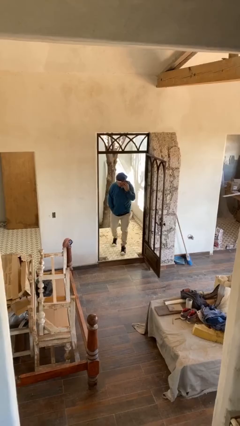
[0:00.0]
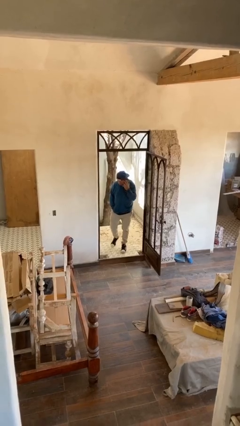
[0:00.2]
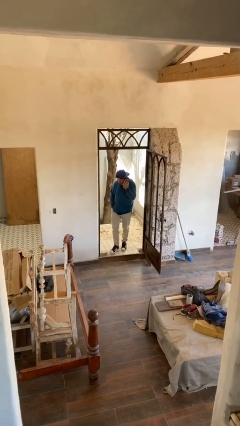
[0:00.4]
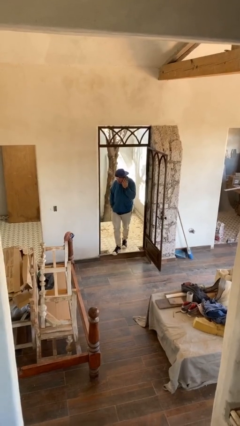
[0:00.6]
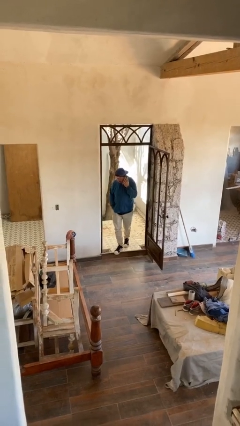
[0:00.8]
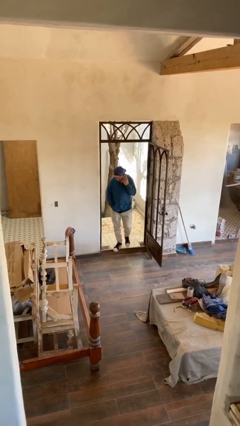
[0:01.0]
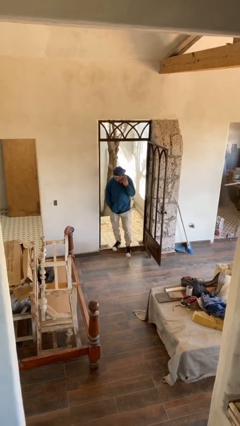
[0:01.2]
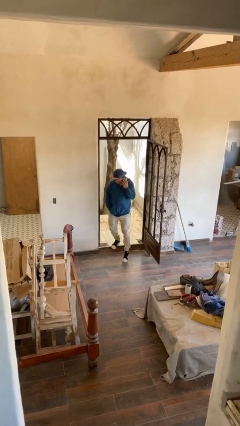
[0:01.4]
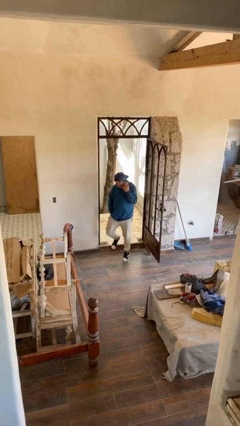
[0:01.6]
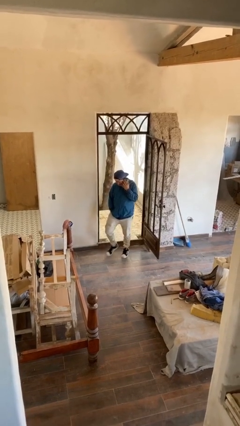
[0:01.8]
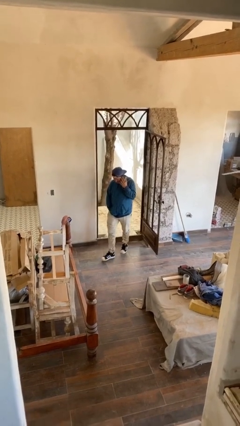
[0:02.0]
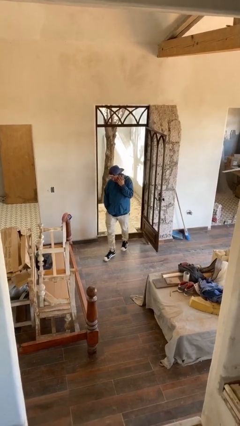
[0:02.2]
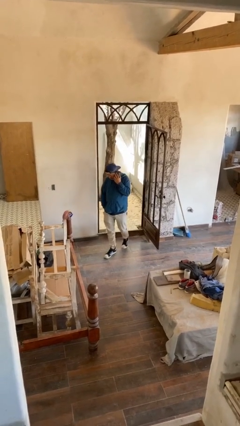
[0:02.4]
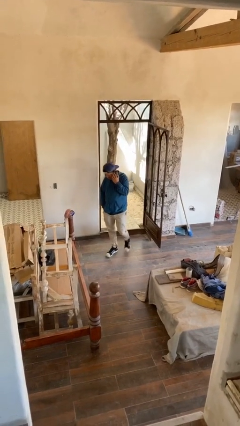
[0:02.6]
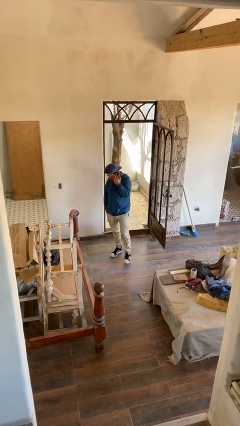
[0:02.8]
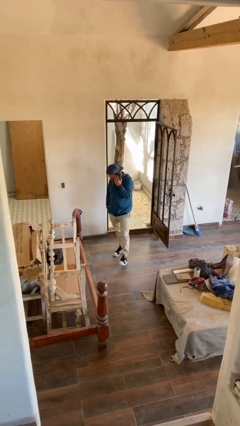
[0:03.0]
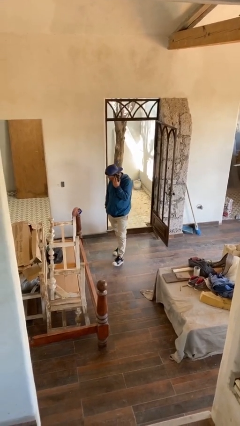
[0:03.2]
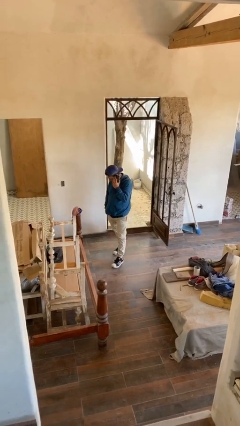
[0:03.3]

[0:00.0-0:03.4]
person enters scene through structure

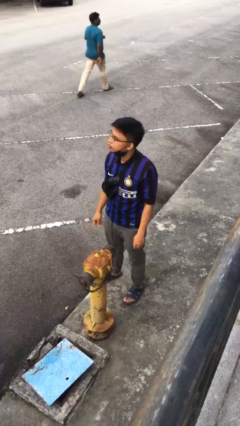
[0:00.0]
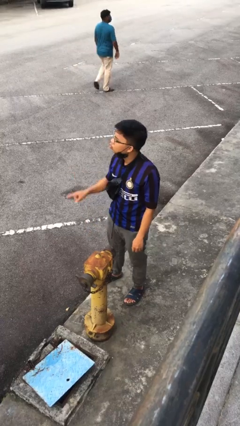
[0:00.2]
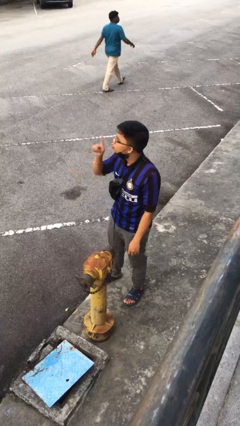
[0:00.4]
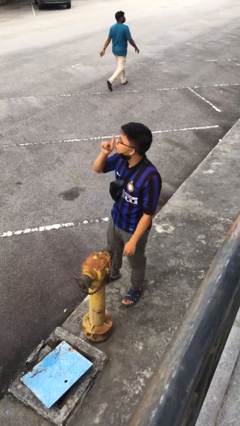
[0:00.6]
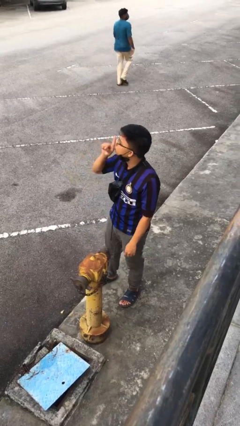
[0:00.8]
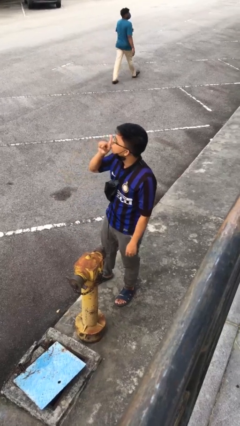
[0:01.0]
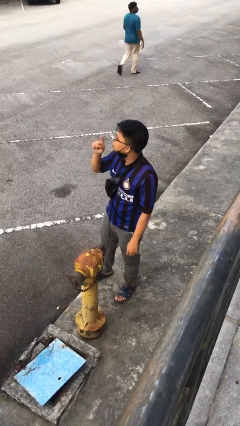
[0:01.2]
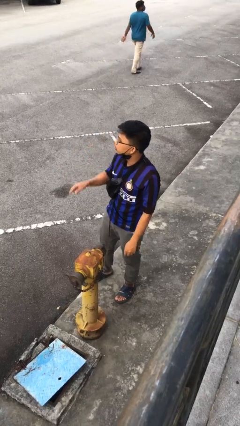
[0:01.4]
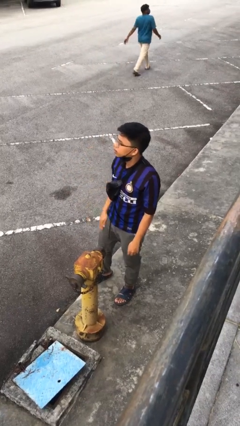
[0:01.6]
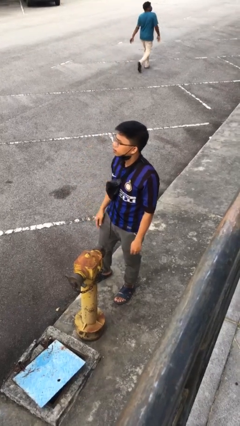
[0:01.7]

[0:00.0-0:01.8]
person gestures be quiet

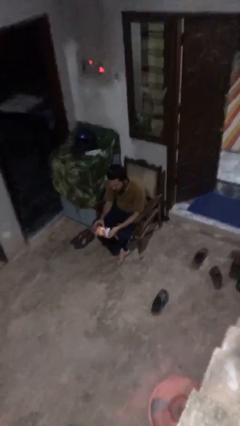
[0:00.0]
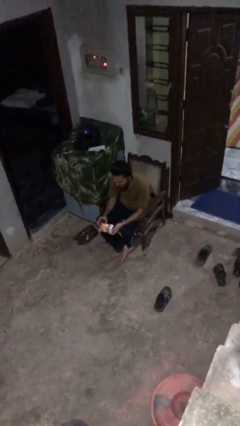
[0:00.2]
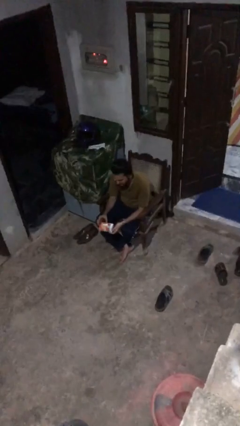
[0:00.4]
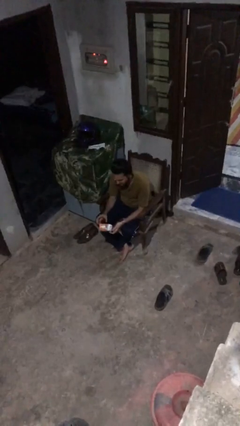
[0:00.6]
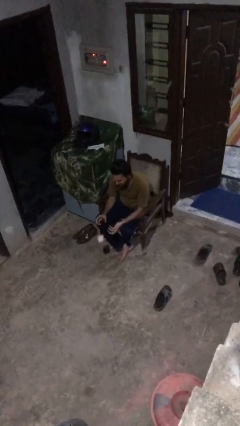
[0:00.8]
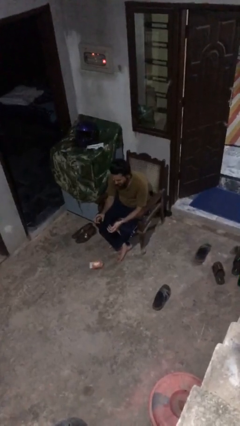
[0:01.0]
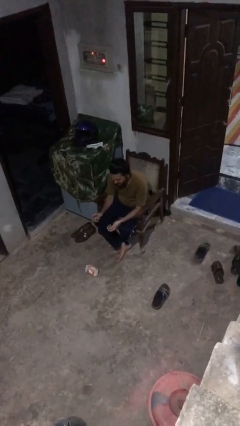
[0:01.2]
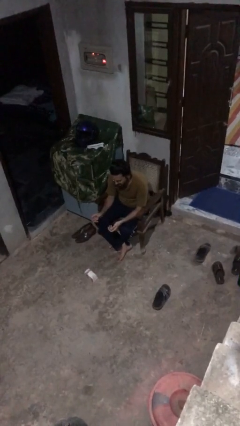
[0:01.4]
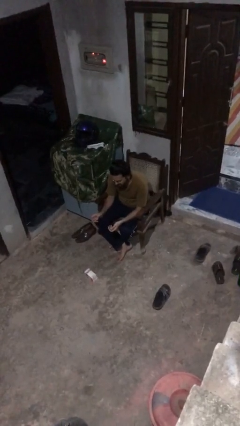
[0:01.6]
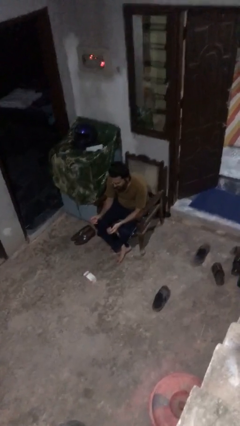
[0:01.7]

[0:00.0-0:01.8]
person drops object

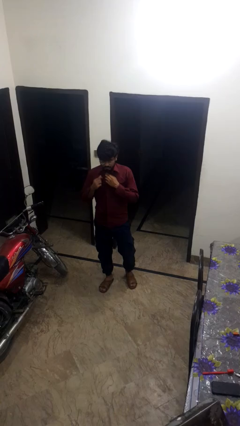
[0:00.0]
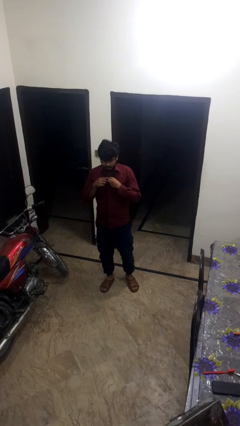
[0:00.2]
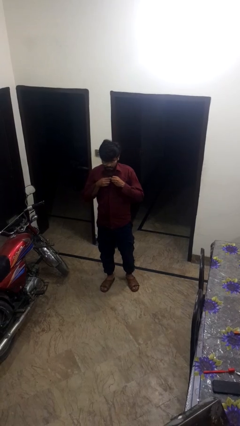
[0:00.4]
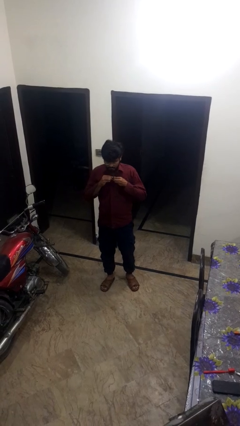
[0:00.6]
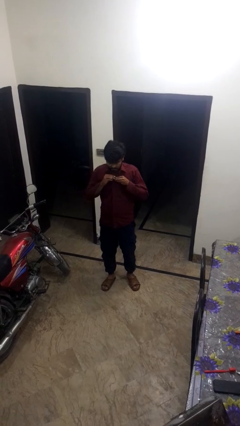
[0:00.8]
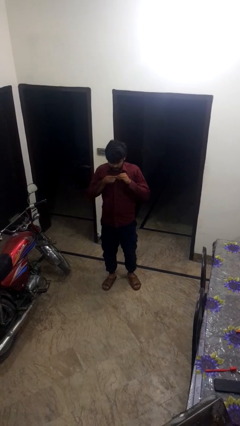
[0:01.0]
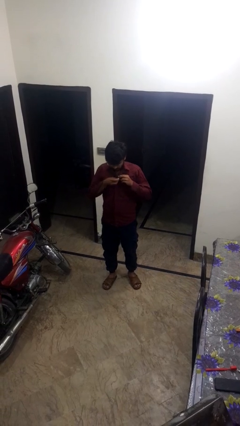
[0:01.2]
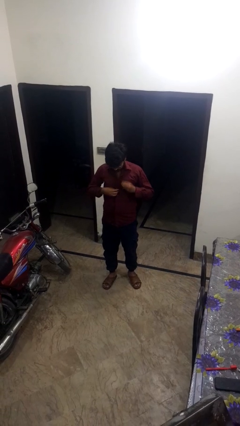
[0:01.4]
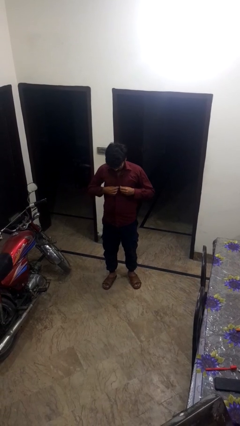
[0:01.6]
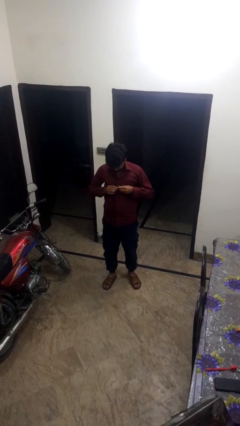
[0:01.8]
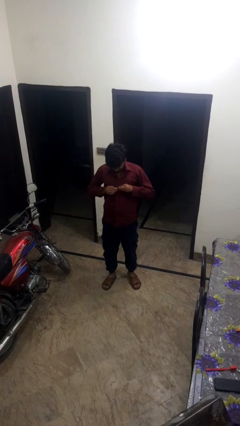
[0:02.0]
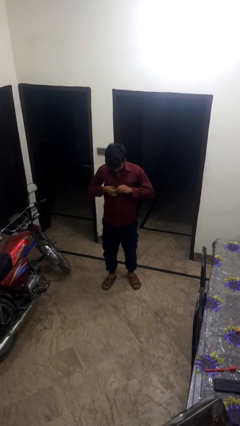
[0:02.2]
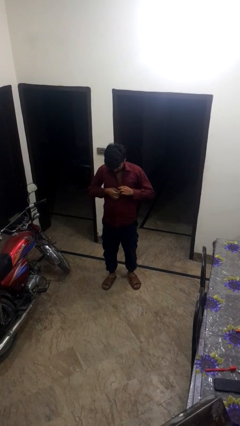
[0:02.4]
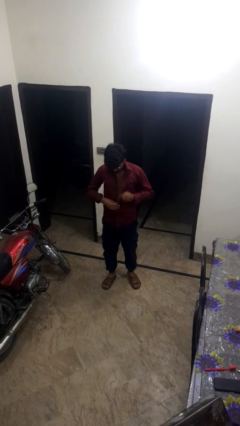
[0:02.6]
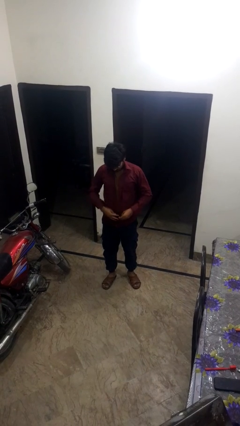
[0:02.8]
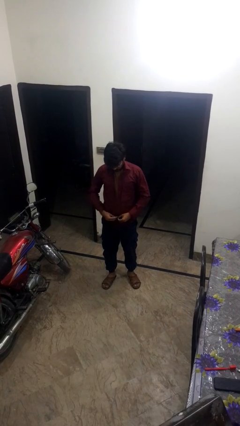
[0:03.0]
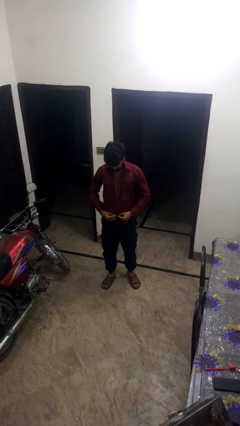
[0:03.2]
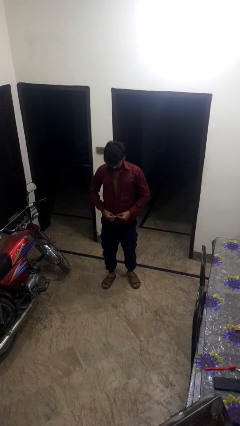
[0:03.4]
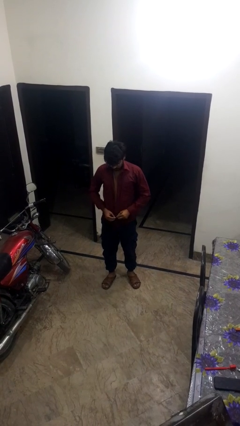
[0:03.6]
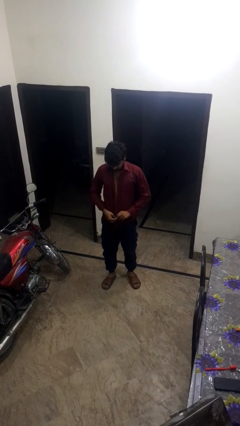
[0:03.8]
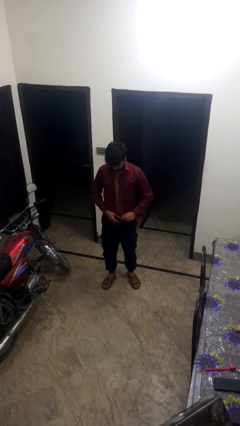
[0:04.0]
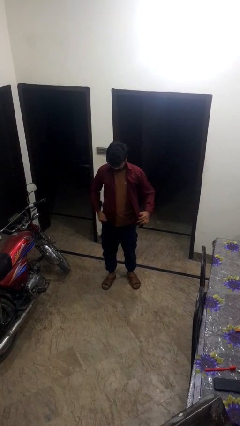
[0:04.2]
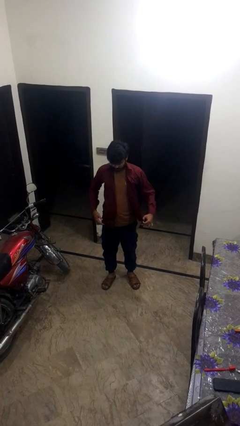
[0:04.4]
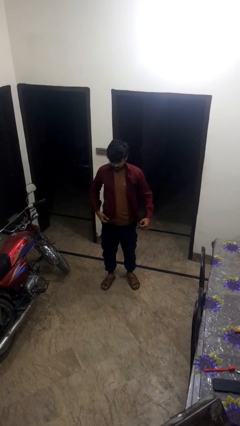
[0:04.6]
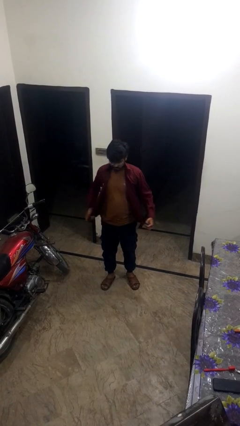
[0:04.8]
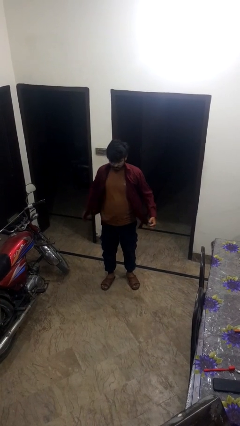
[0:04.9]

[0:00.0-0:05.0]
person unbuttons shirt

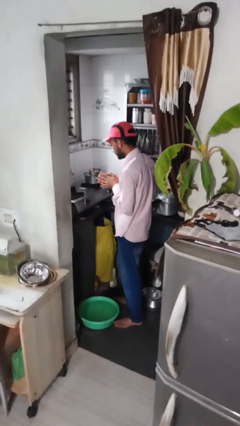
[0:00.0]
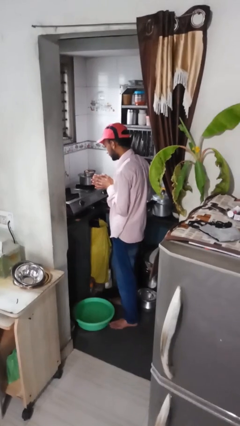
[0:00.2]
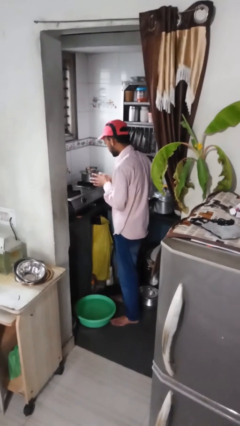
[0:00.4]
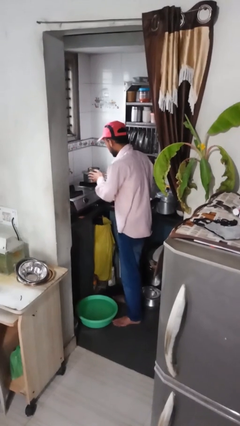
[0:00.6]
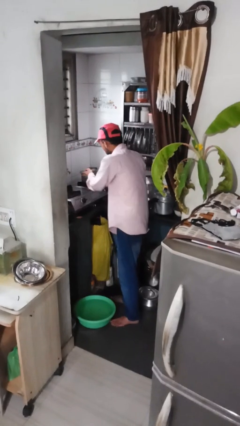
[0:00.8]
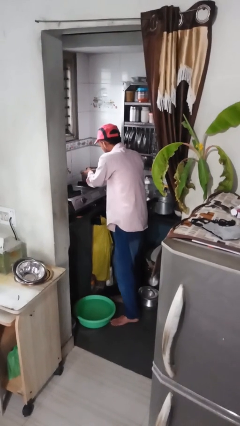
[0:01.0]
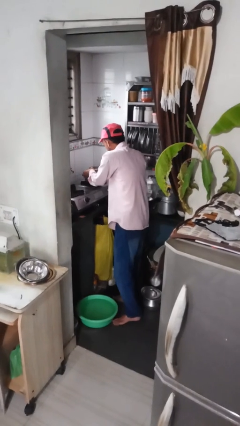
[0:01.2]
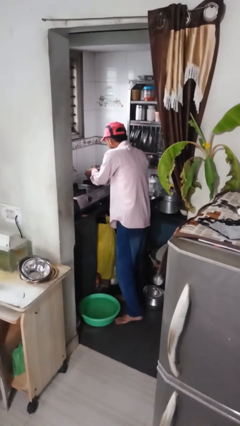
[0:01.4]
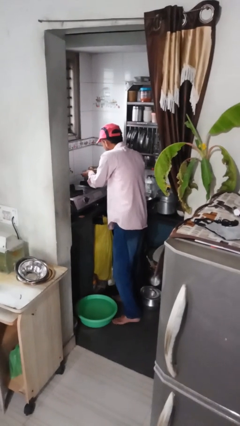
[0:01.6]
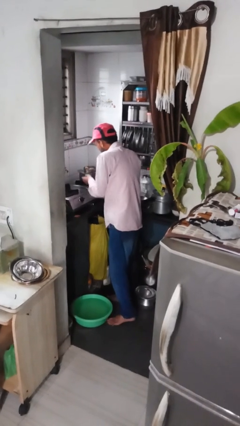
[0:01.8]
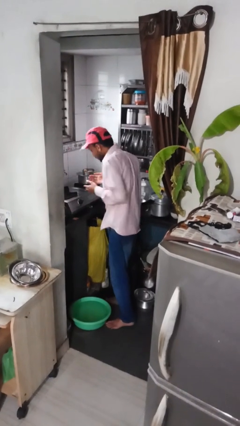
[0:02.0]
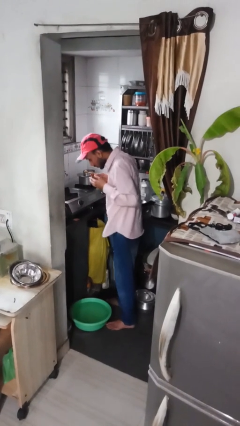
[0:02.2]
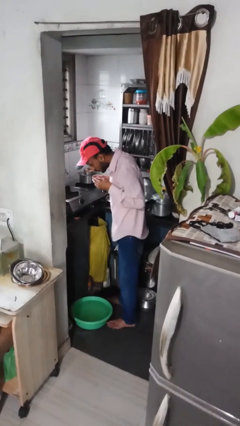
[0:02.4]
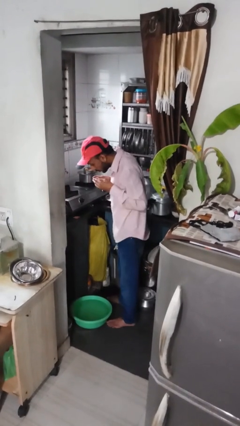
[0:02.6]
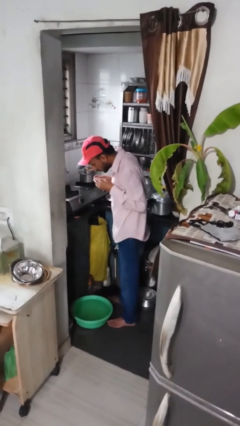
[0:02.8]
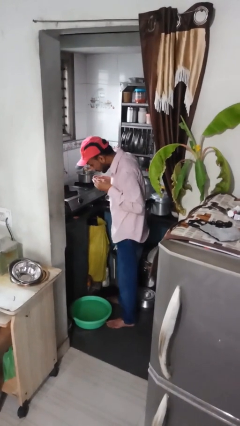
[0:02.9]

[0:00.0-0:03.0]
person burns hand

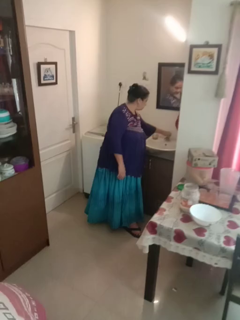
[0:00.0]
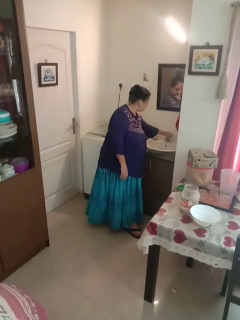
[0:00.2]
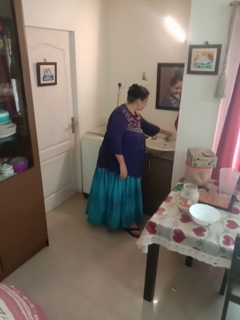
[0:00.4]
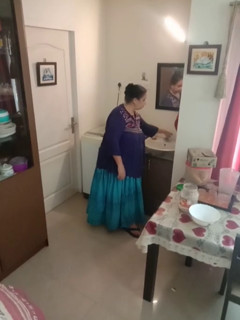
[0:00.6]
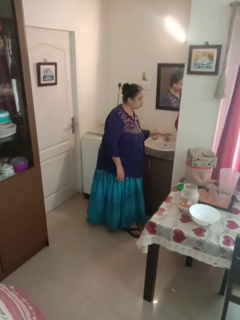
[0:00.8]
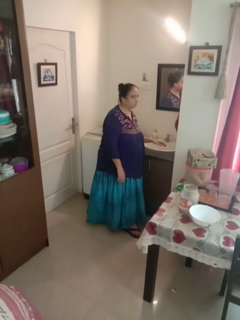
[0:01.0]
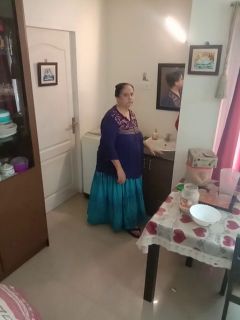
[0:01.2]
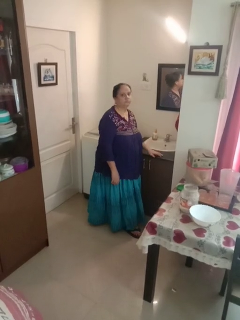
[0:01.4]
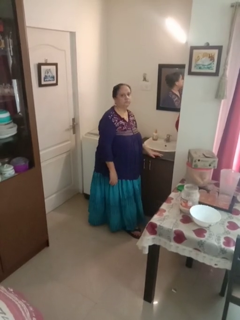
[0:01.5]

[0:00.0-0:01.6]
person turns on faucet

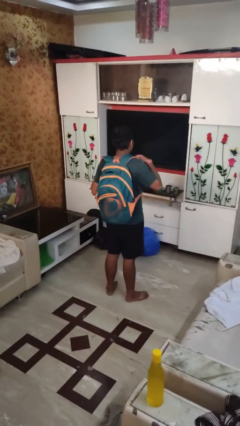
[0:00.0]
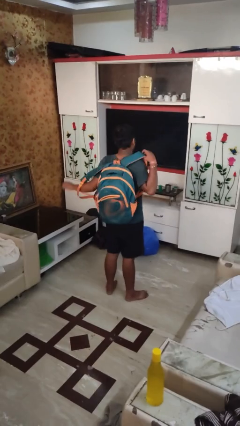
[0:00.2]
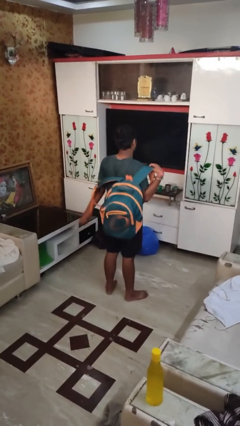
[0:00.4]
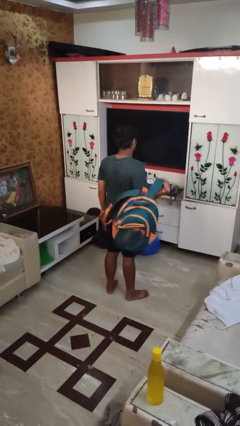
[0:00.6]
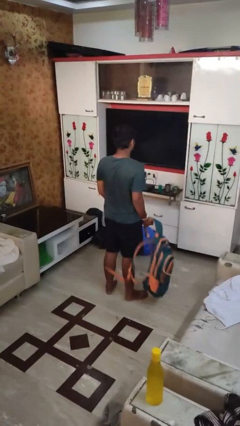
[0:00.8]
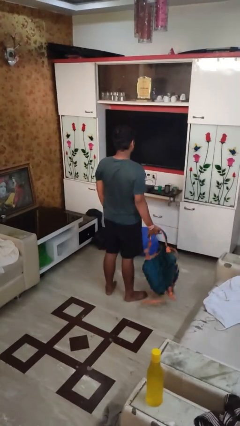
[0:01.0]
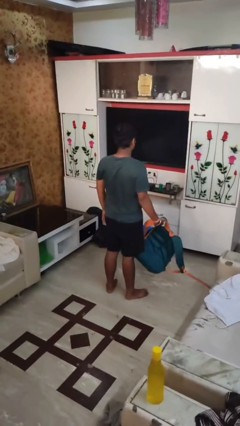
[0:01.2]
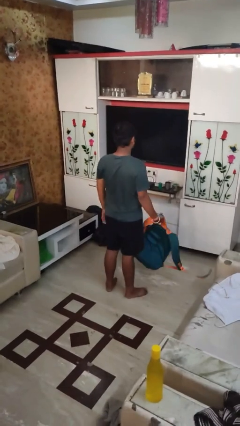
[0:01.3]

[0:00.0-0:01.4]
person takes off backpack
